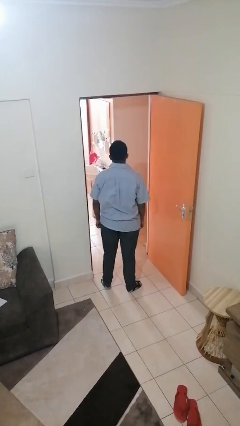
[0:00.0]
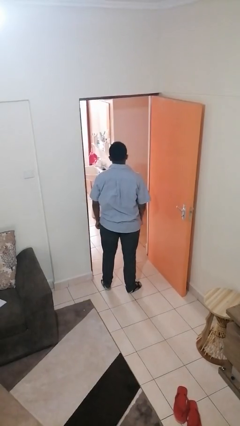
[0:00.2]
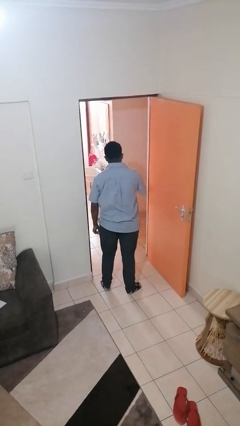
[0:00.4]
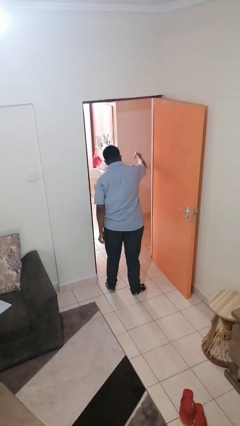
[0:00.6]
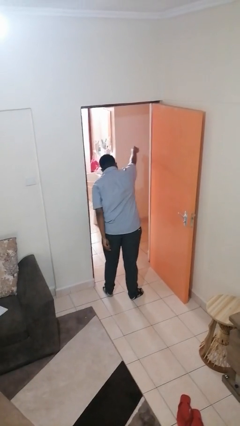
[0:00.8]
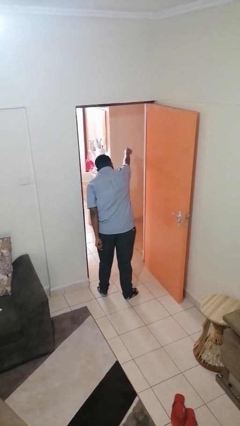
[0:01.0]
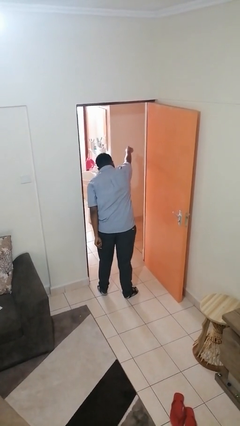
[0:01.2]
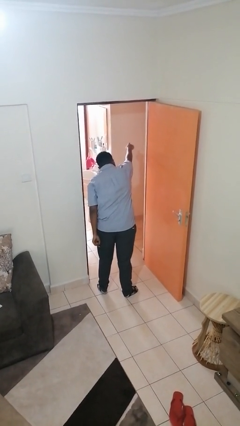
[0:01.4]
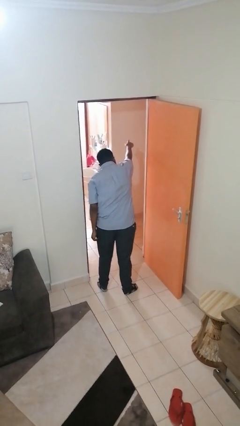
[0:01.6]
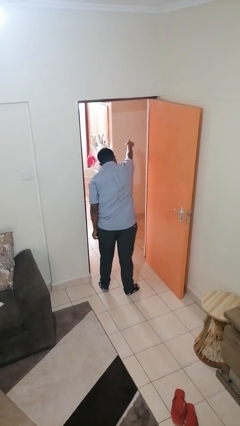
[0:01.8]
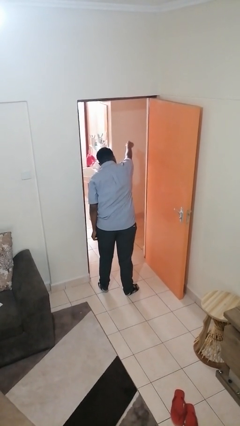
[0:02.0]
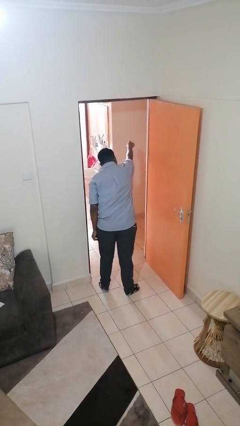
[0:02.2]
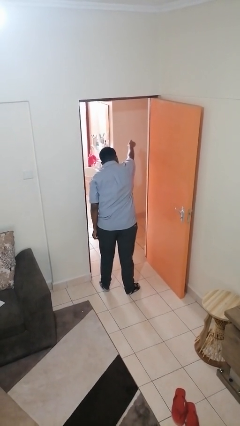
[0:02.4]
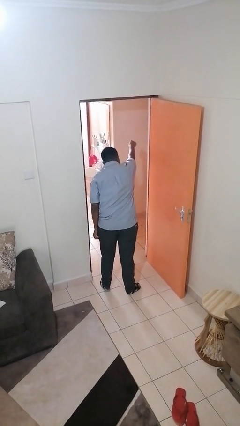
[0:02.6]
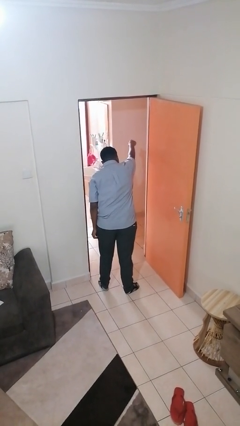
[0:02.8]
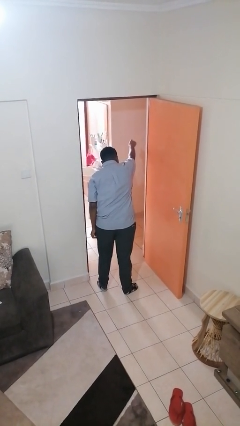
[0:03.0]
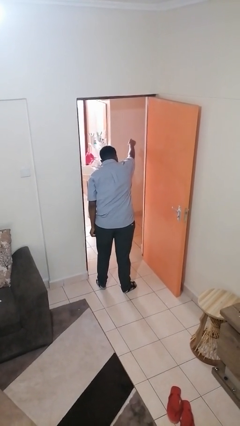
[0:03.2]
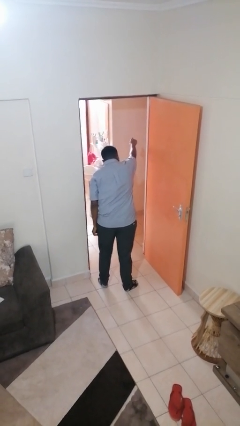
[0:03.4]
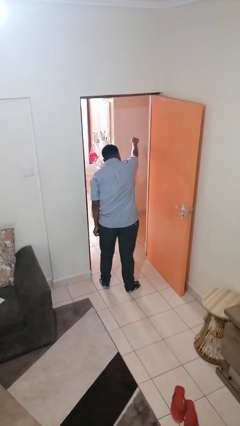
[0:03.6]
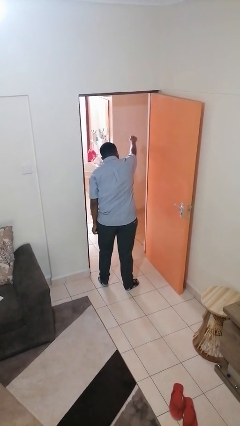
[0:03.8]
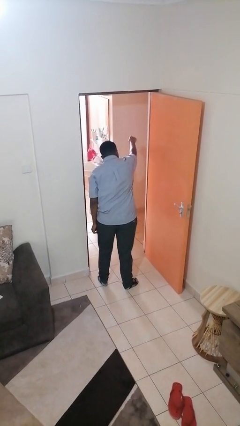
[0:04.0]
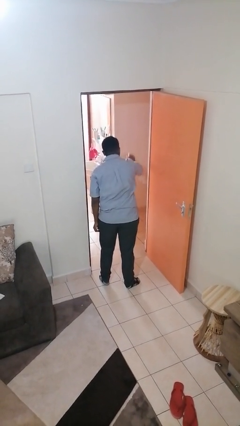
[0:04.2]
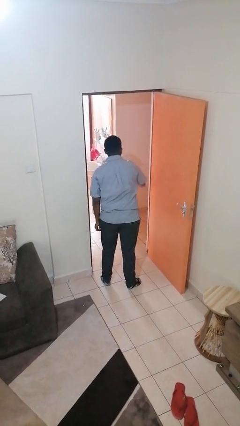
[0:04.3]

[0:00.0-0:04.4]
person points at person

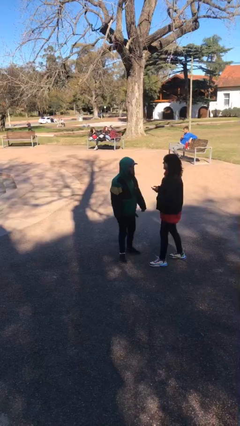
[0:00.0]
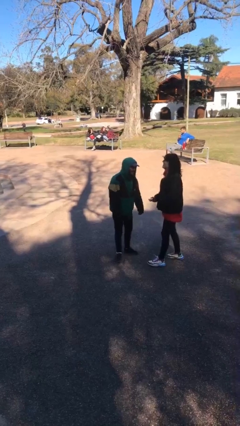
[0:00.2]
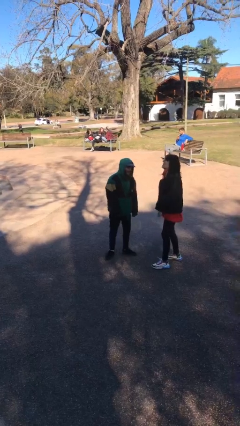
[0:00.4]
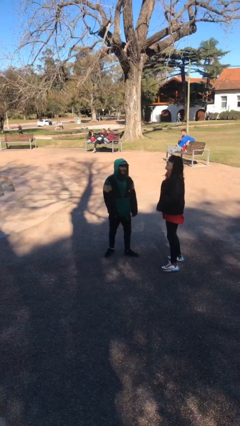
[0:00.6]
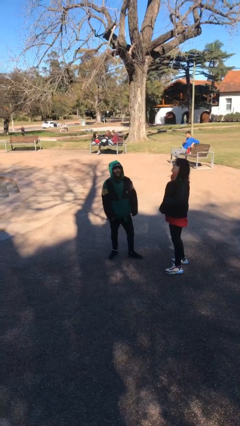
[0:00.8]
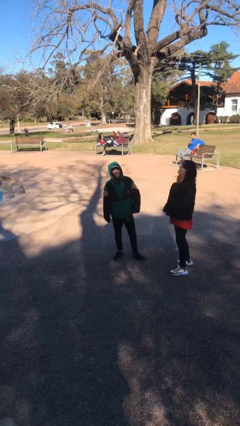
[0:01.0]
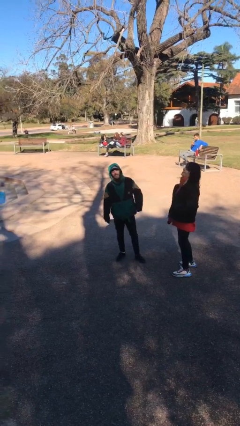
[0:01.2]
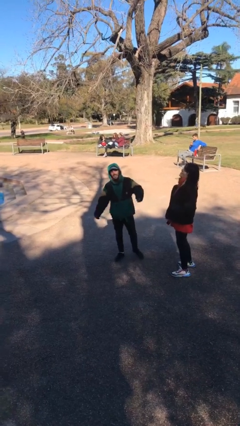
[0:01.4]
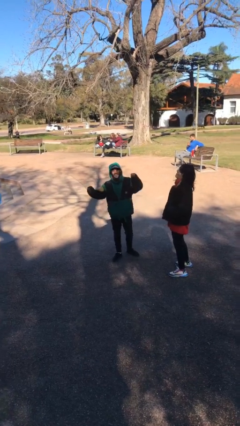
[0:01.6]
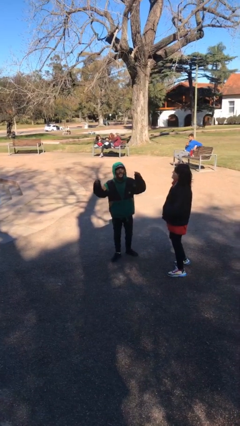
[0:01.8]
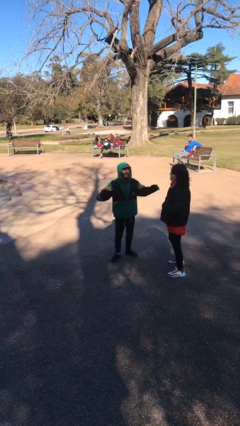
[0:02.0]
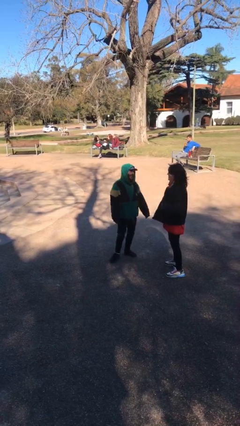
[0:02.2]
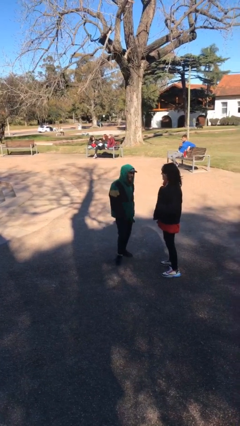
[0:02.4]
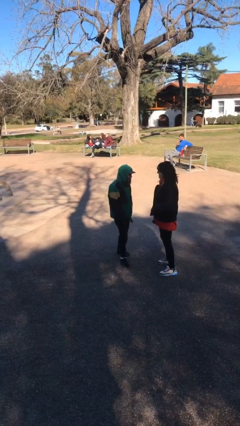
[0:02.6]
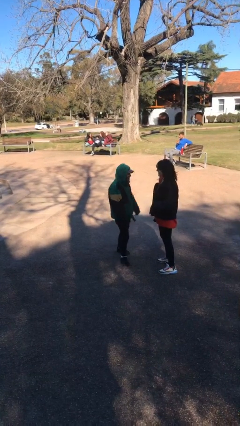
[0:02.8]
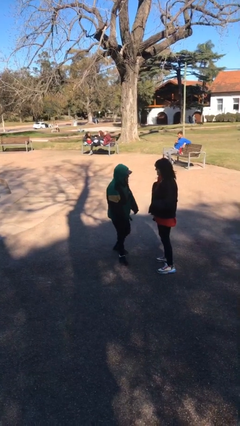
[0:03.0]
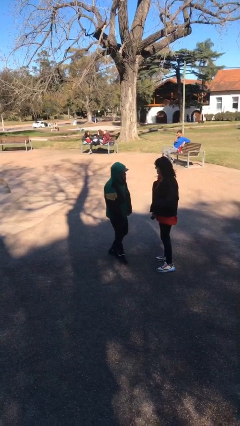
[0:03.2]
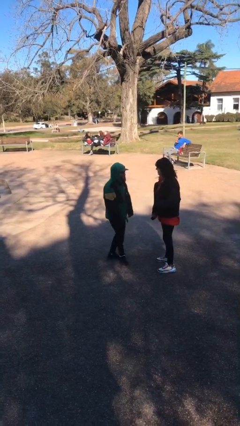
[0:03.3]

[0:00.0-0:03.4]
person laughs with person

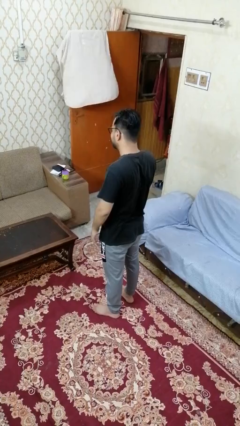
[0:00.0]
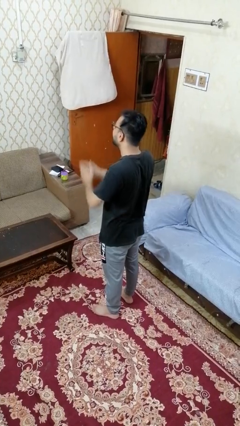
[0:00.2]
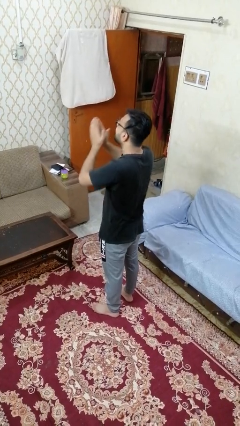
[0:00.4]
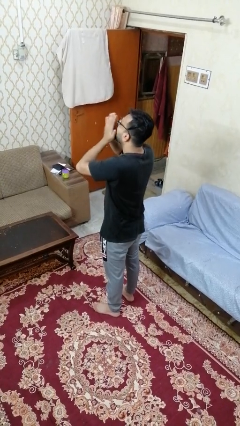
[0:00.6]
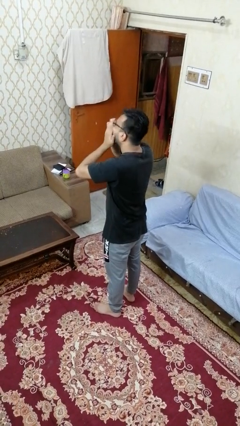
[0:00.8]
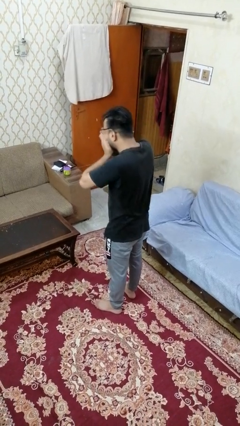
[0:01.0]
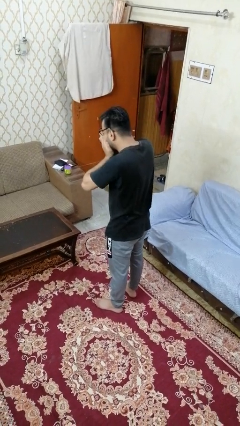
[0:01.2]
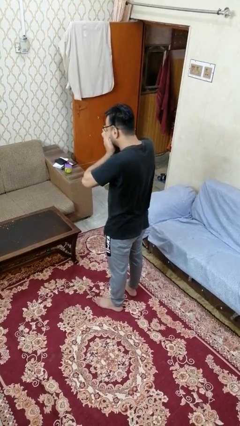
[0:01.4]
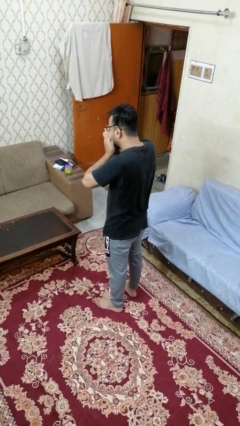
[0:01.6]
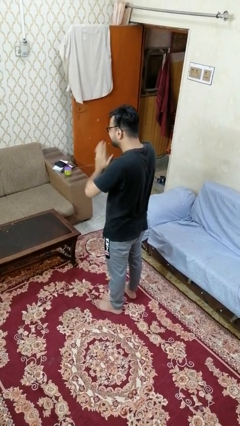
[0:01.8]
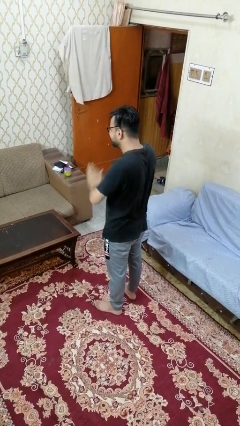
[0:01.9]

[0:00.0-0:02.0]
person sneezes into hand

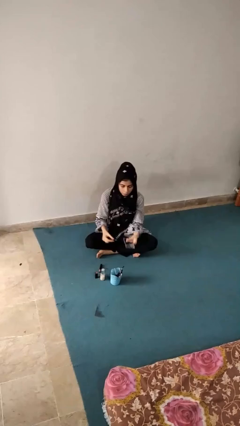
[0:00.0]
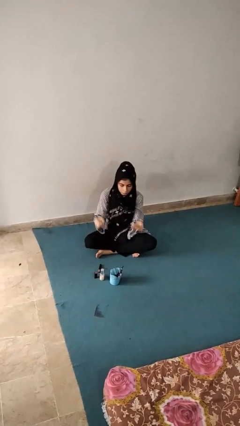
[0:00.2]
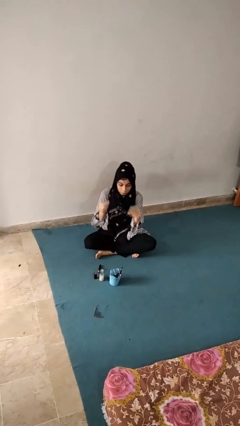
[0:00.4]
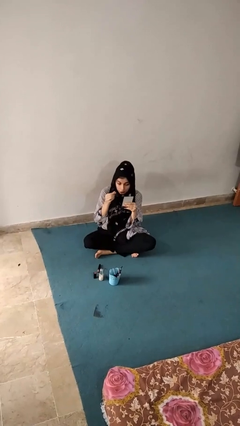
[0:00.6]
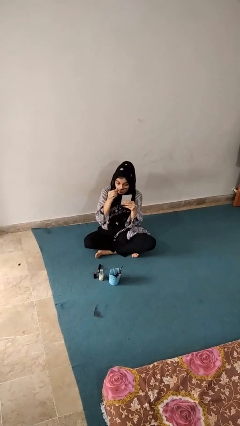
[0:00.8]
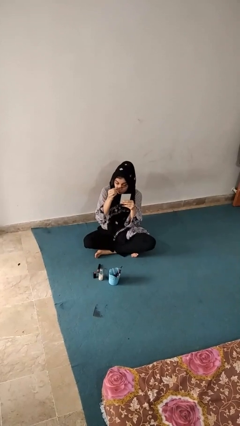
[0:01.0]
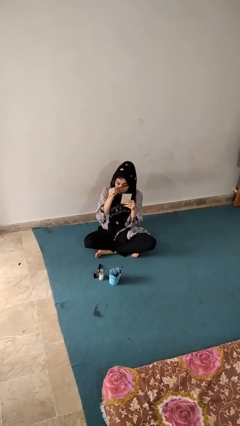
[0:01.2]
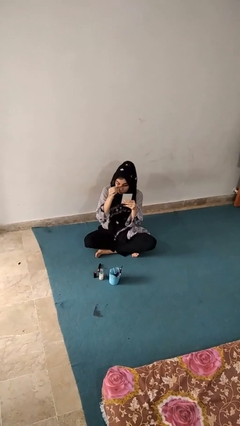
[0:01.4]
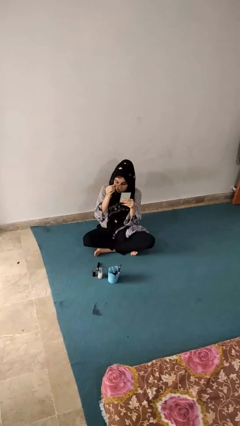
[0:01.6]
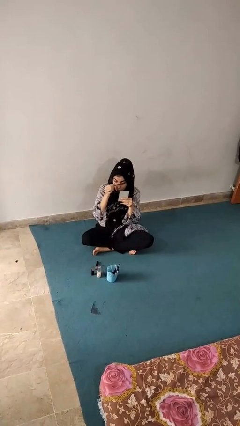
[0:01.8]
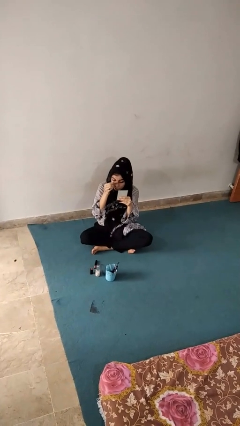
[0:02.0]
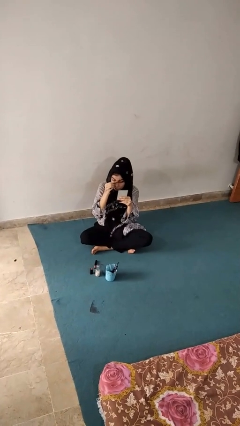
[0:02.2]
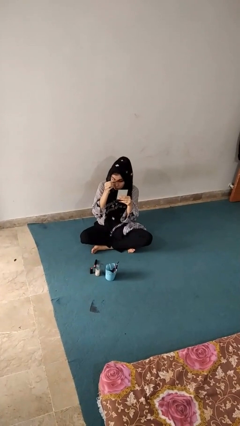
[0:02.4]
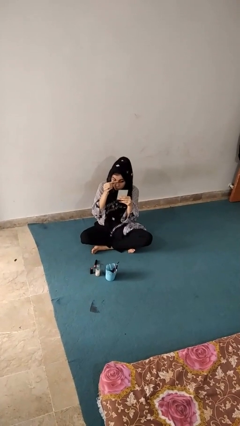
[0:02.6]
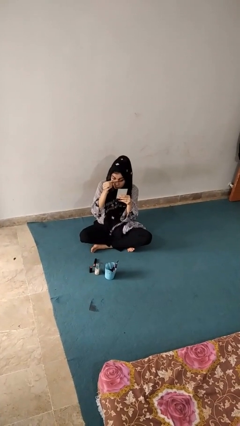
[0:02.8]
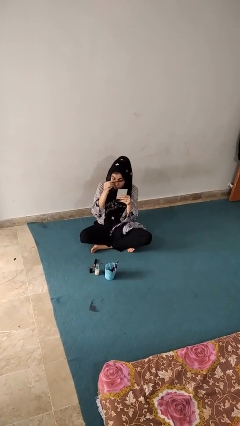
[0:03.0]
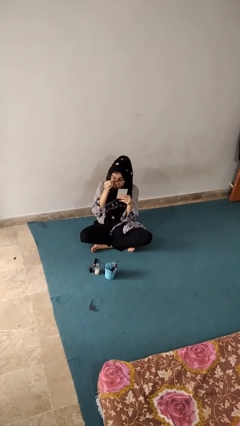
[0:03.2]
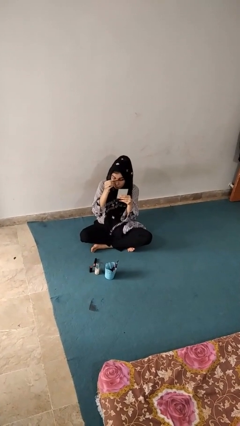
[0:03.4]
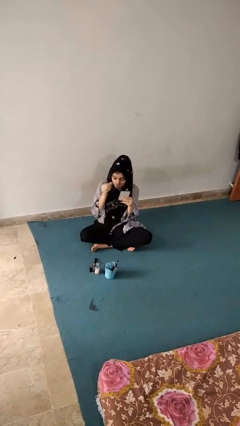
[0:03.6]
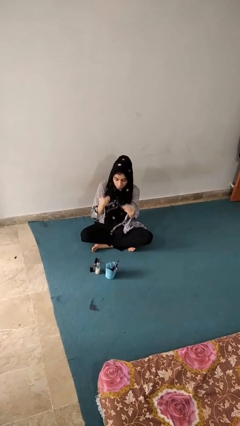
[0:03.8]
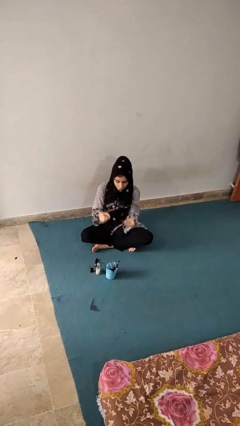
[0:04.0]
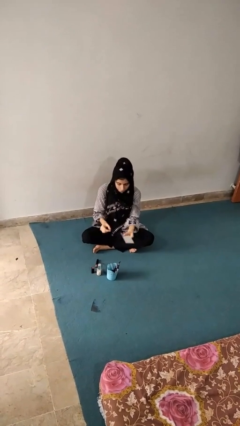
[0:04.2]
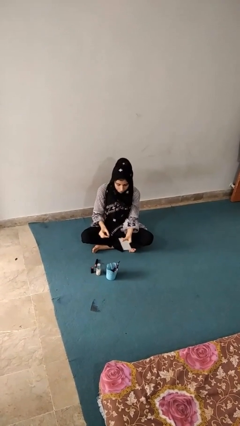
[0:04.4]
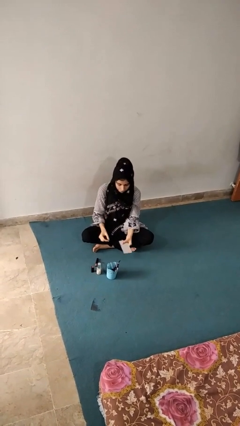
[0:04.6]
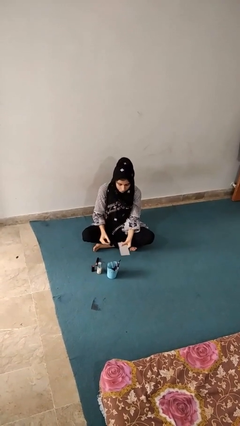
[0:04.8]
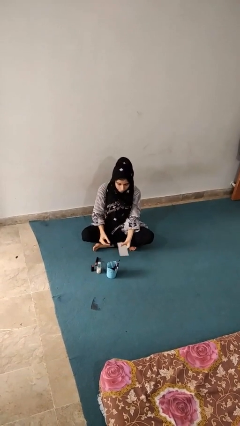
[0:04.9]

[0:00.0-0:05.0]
person applies eye makeup

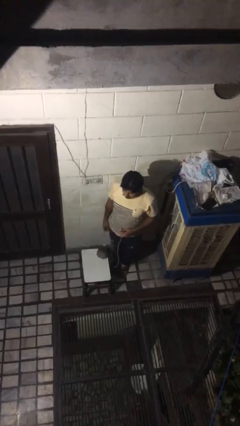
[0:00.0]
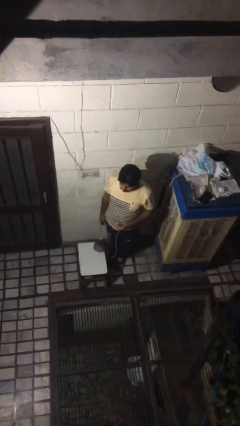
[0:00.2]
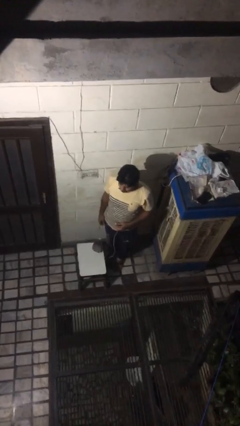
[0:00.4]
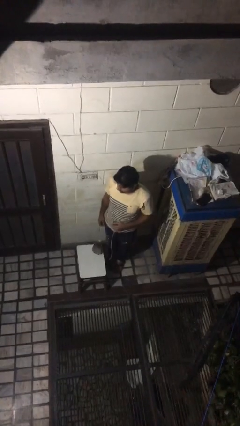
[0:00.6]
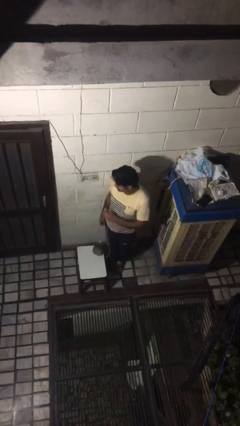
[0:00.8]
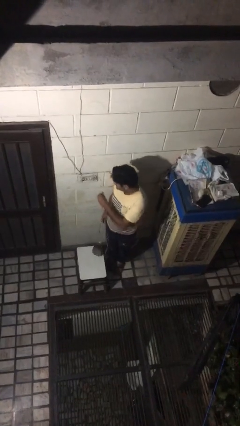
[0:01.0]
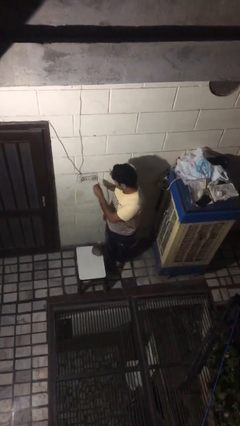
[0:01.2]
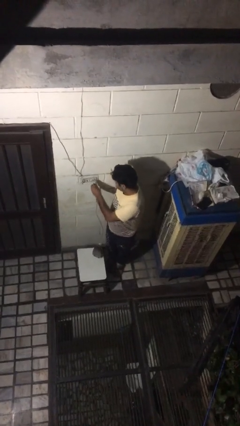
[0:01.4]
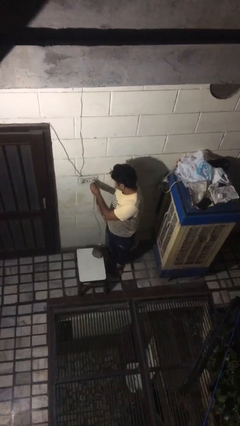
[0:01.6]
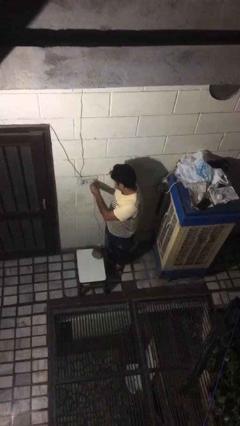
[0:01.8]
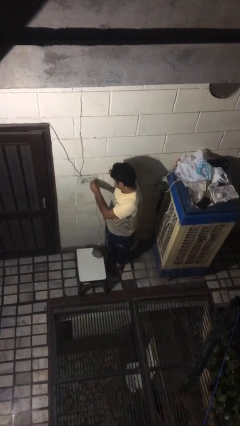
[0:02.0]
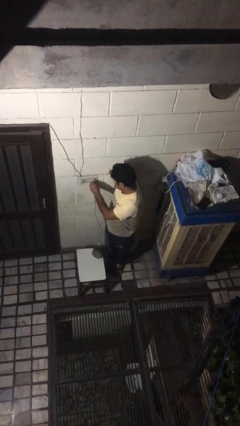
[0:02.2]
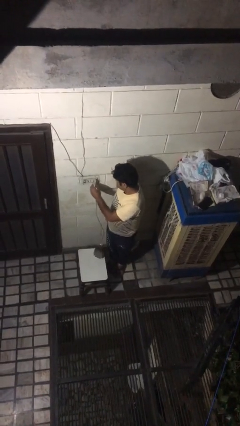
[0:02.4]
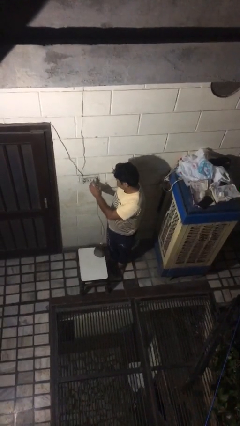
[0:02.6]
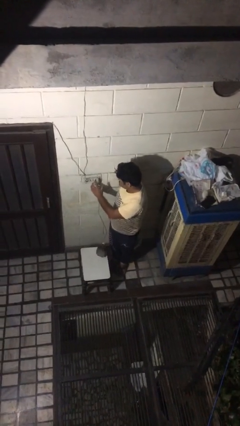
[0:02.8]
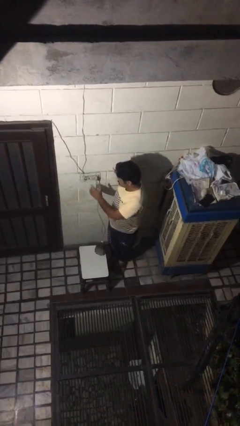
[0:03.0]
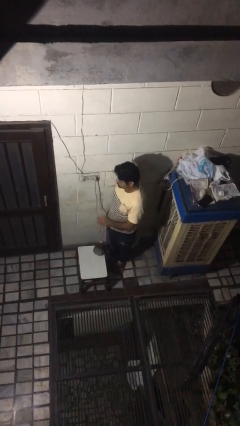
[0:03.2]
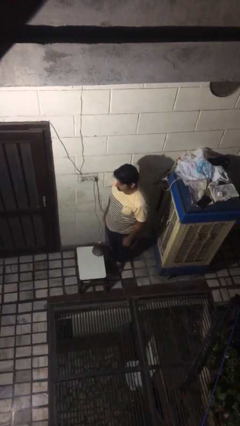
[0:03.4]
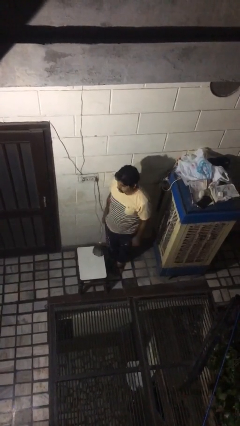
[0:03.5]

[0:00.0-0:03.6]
person plugs into electrical socket
